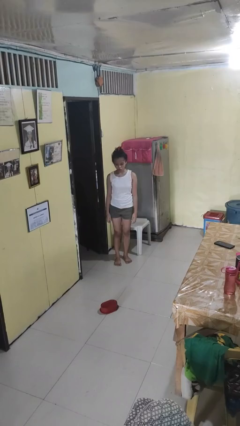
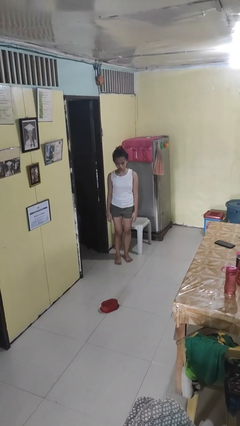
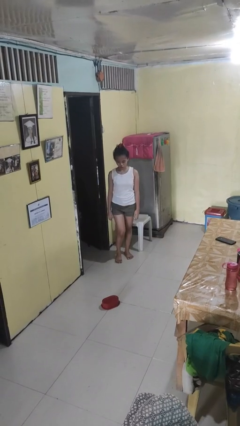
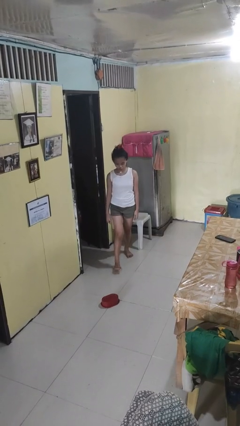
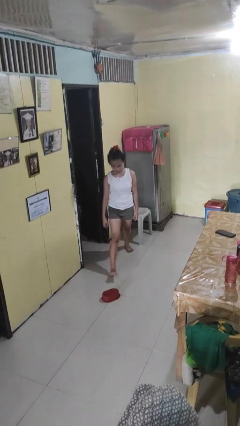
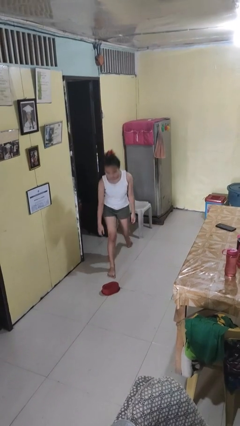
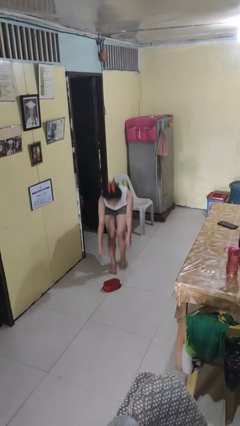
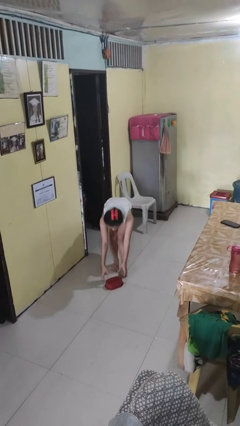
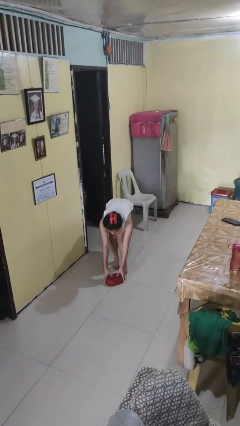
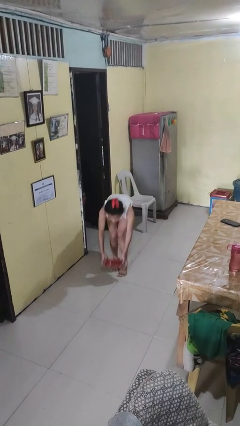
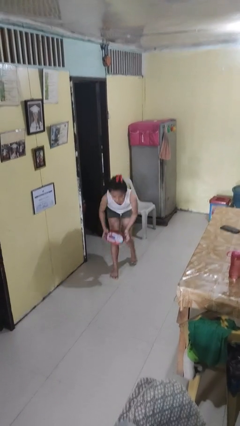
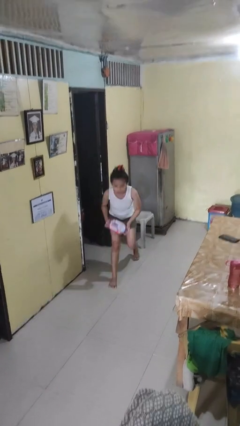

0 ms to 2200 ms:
person picks up object from floor

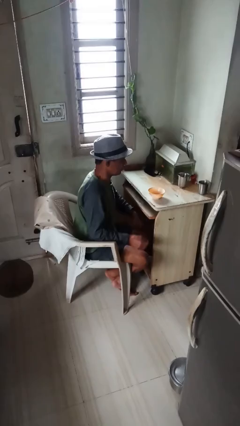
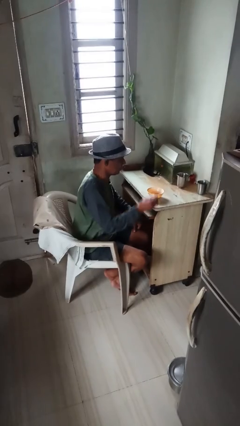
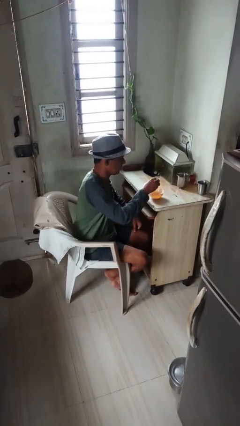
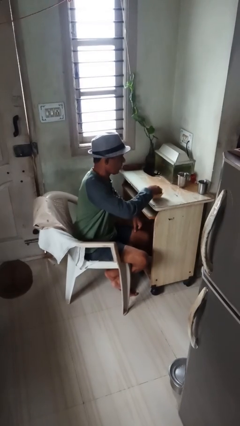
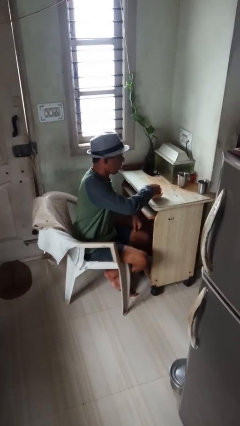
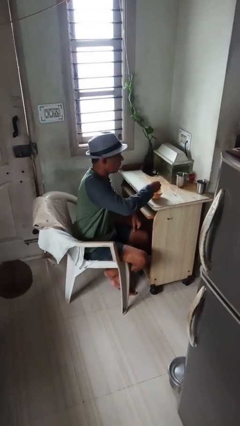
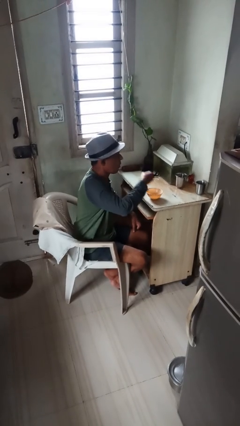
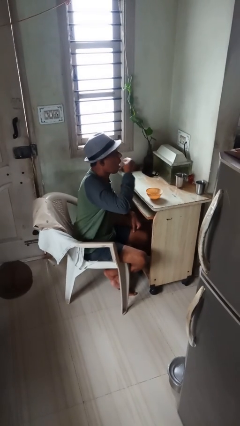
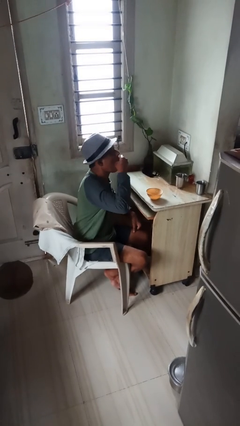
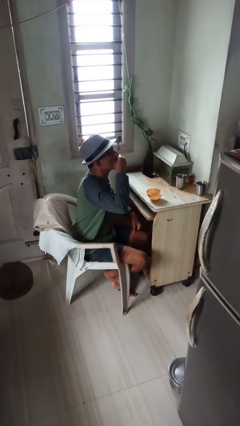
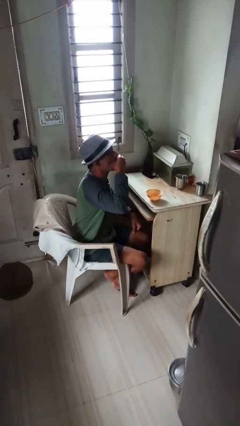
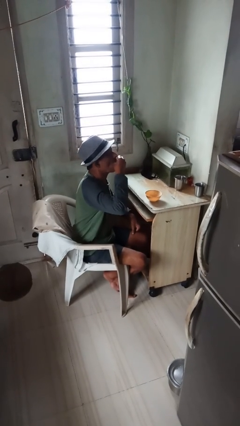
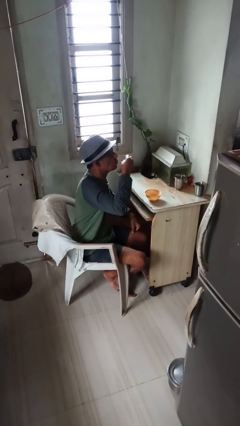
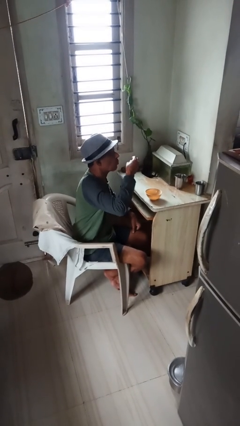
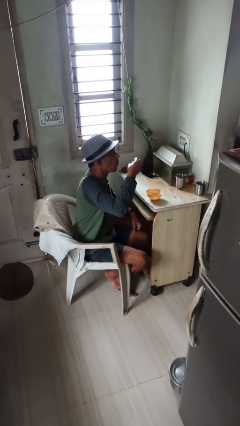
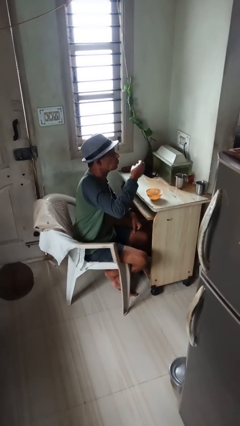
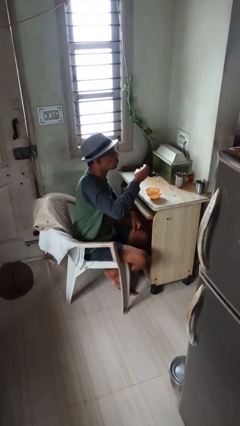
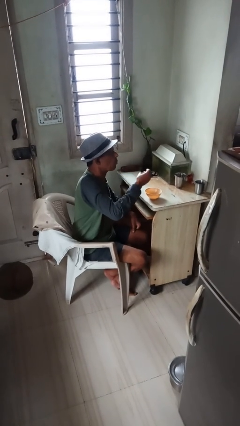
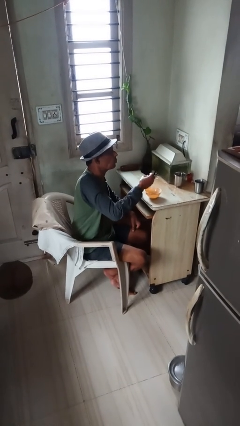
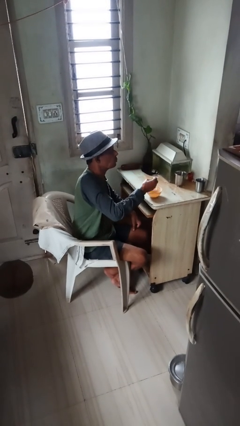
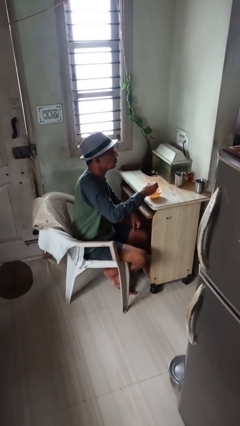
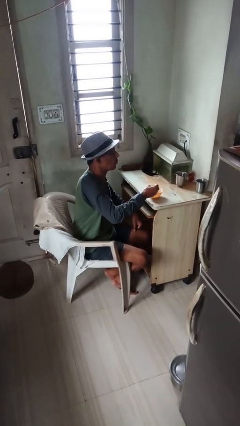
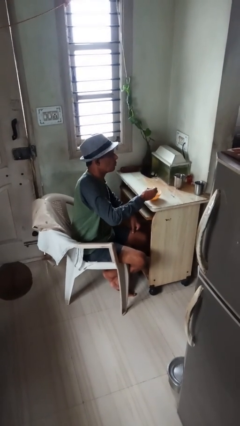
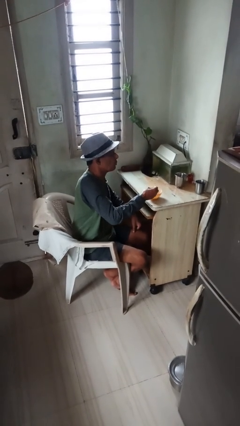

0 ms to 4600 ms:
person eats with hands

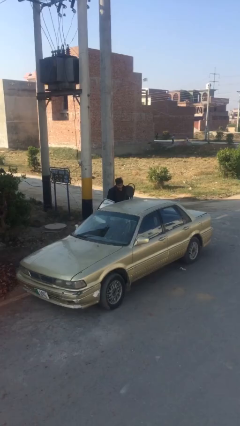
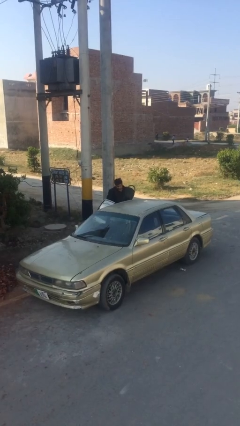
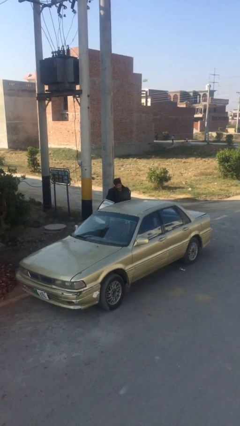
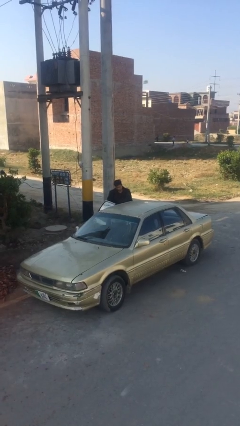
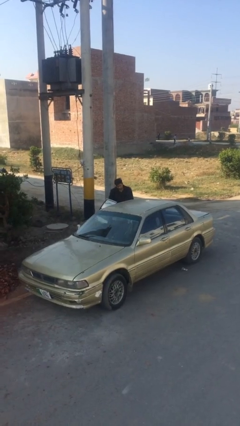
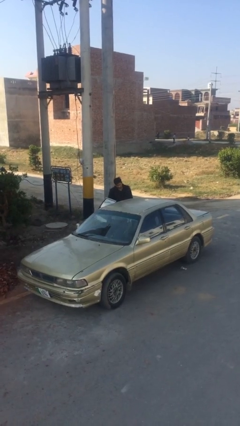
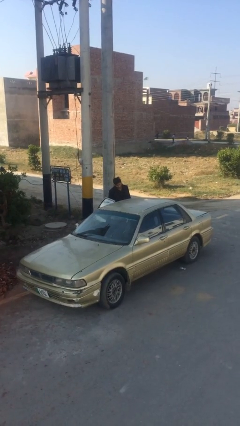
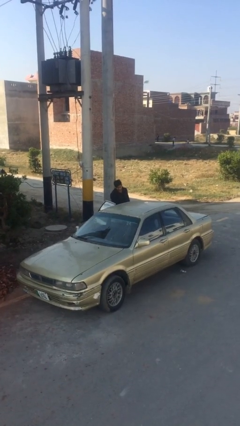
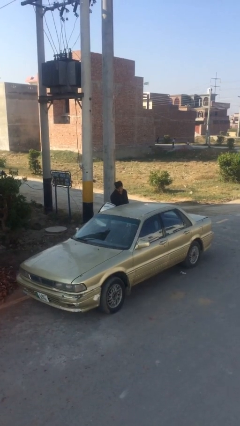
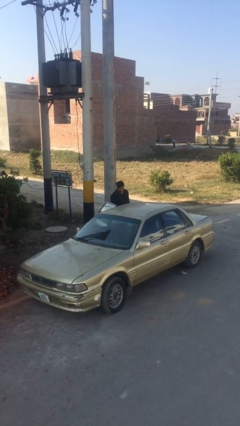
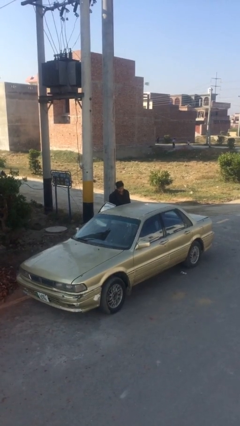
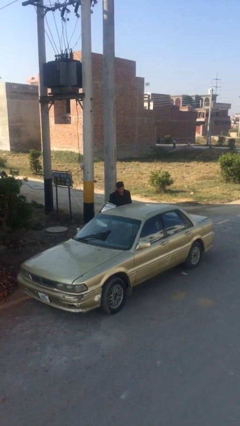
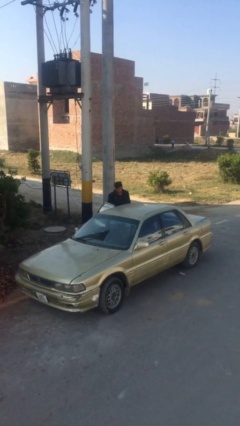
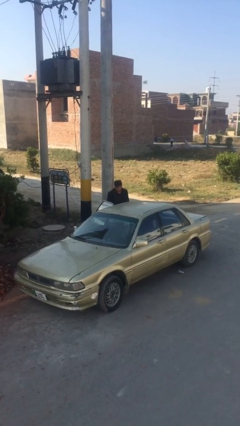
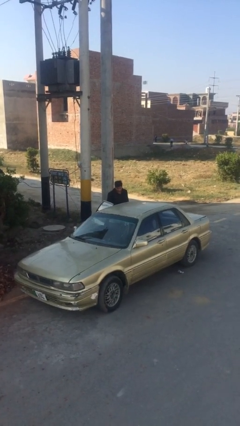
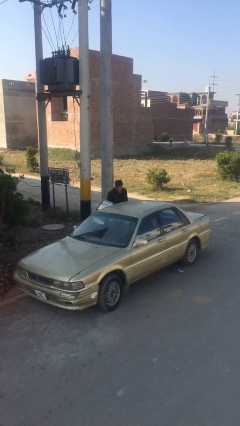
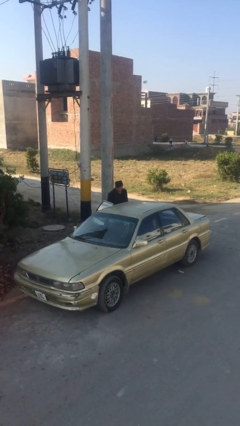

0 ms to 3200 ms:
person loads car

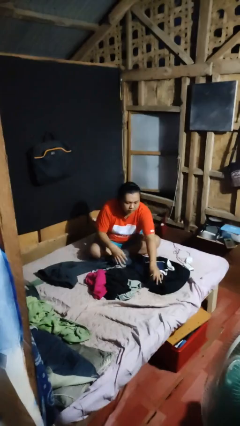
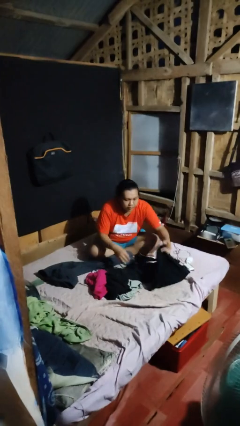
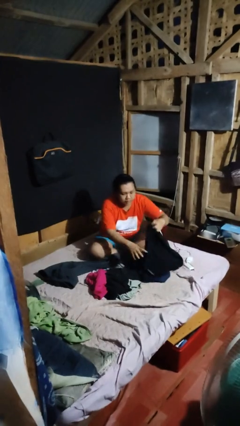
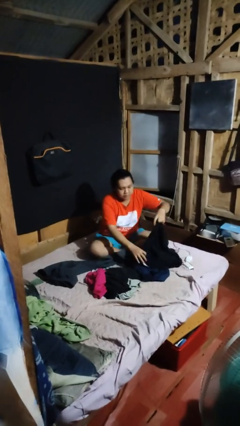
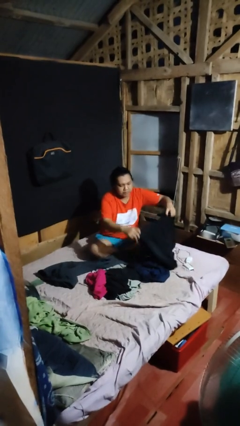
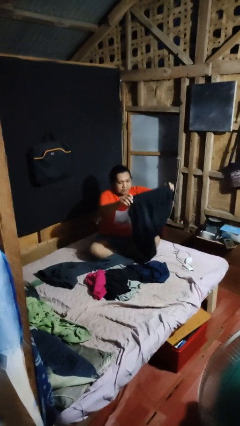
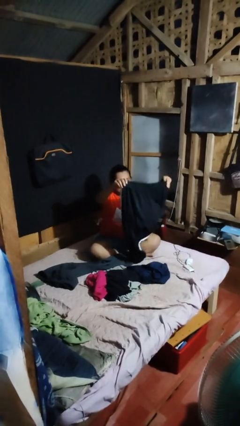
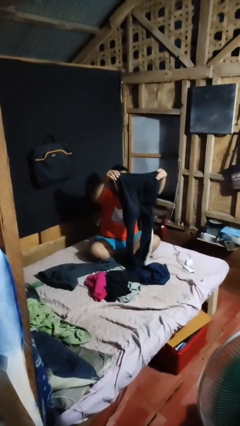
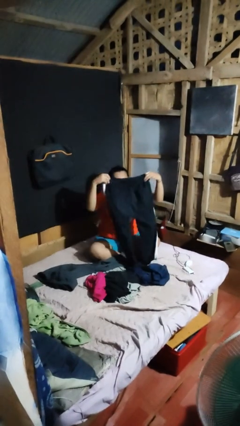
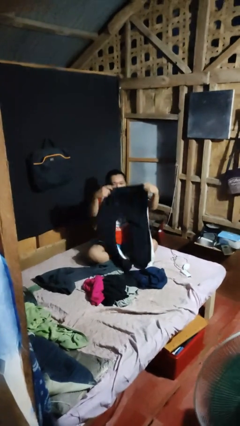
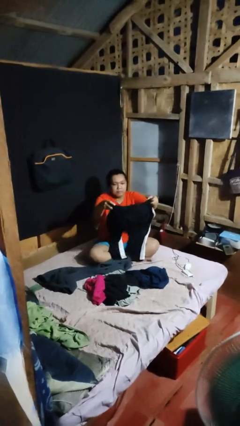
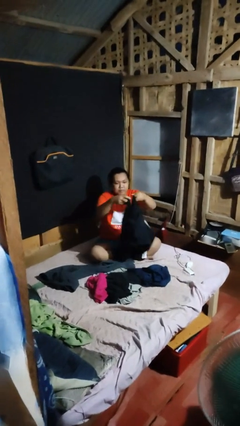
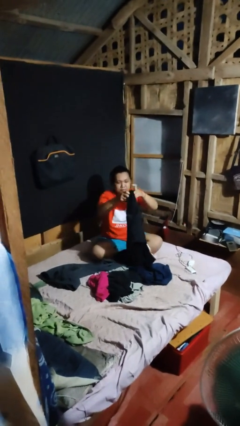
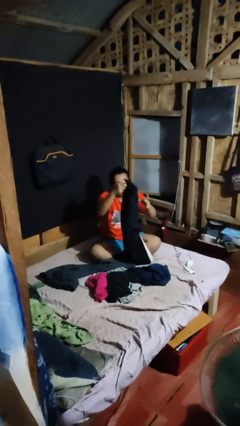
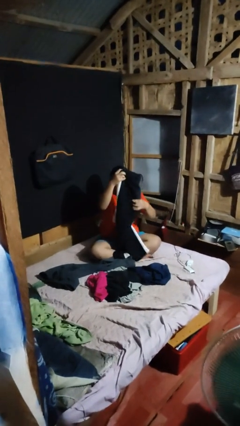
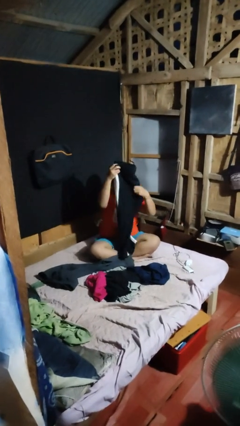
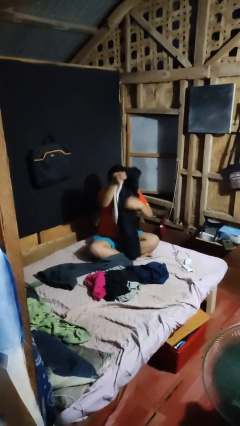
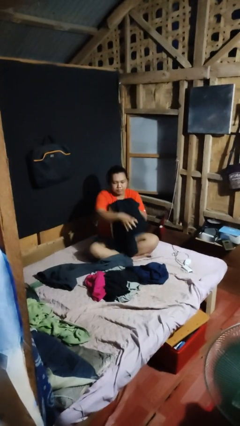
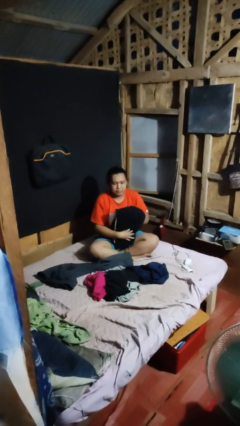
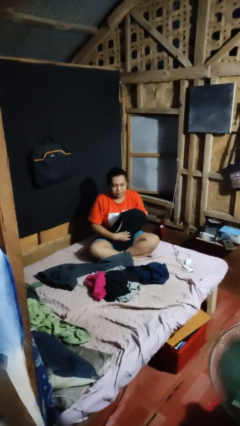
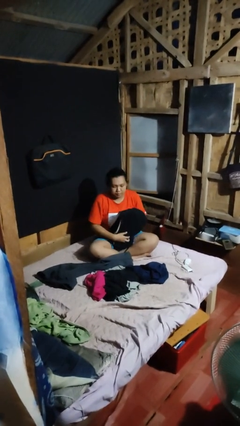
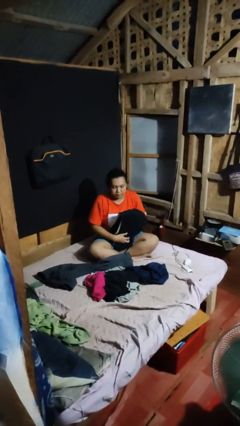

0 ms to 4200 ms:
person folds pants

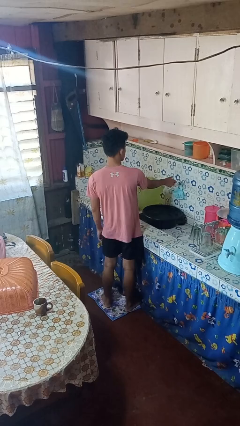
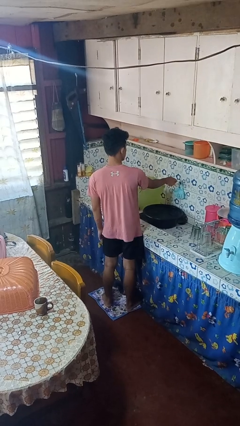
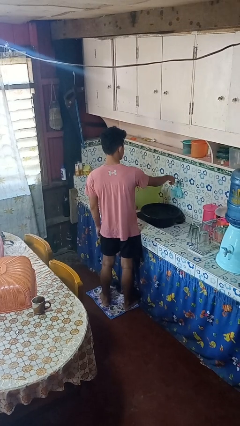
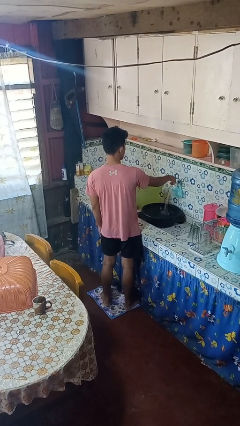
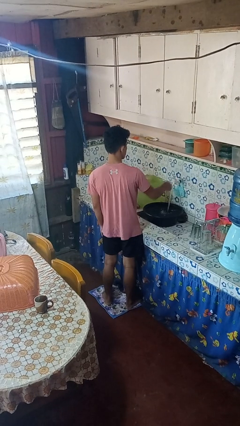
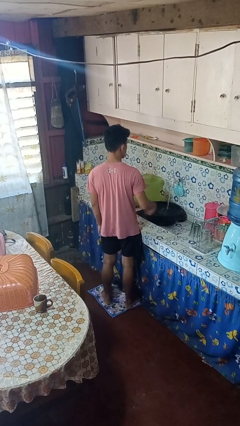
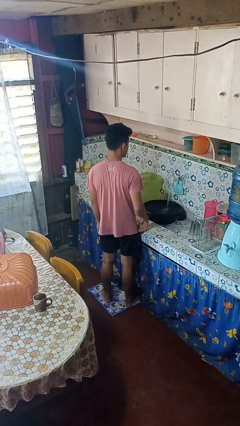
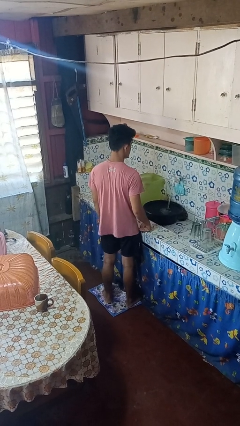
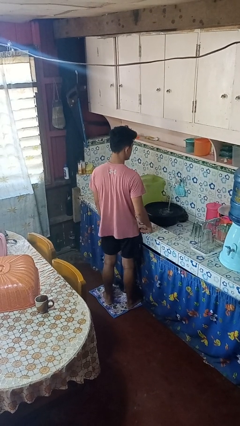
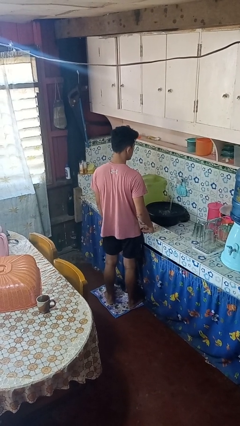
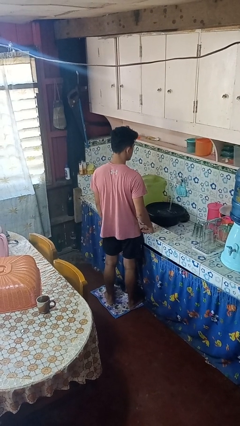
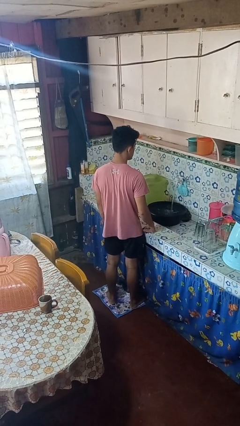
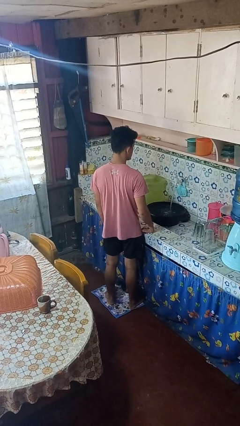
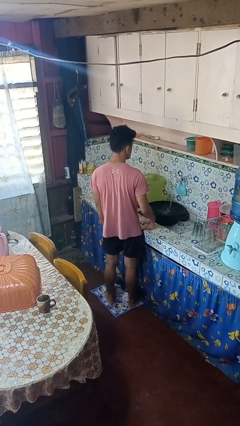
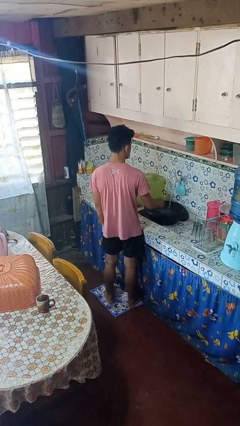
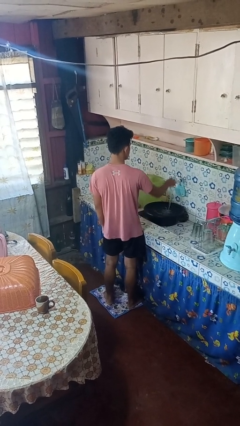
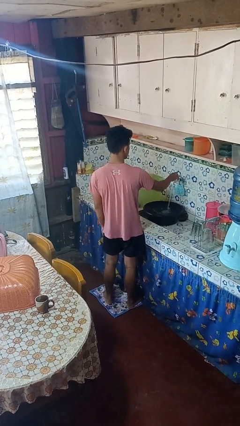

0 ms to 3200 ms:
person turns on faucet
